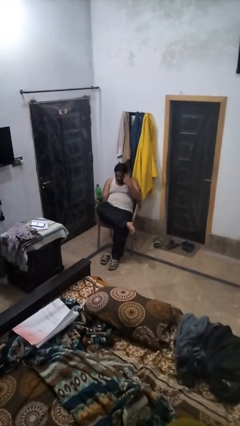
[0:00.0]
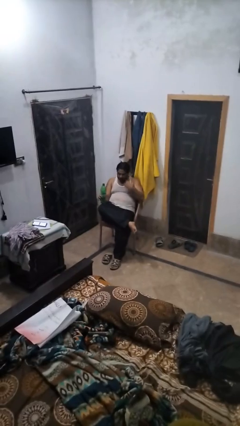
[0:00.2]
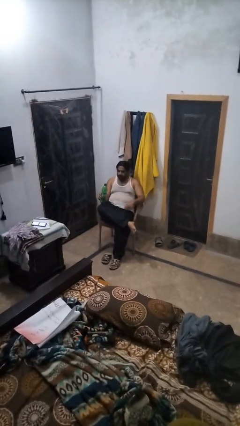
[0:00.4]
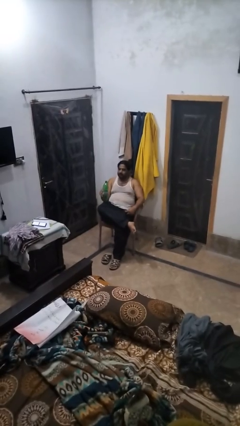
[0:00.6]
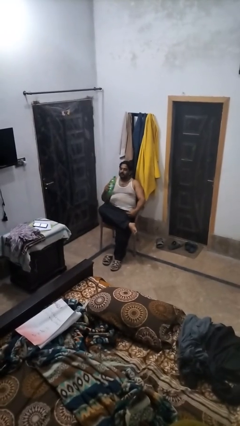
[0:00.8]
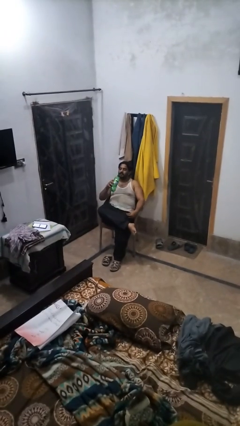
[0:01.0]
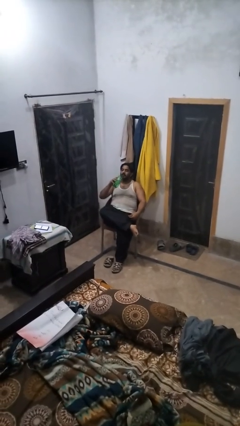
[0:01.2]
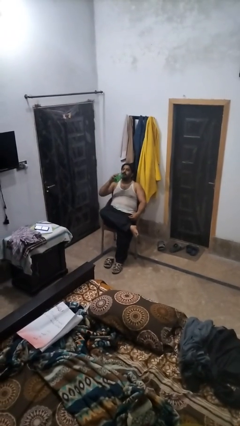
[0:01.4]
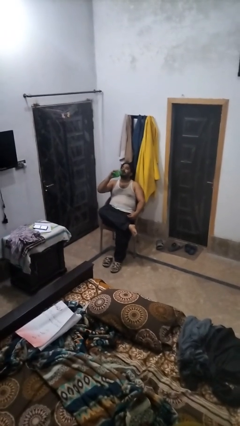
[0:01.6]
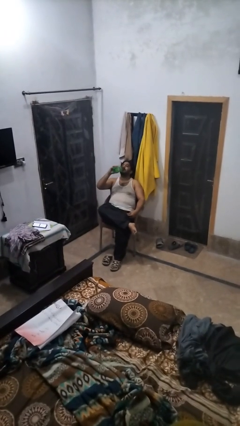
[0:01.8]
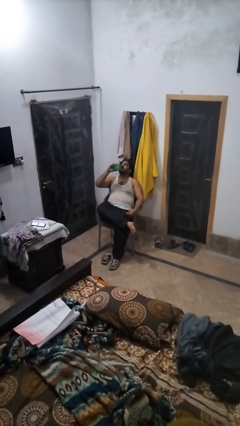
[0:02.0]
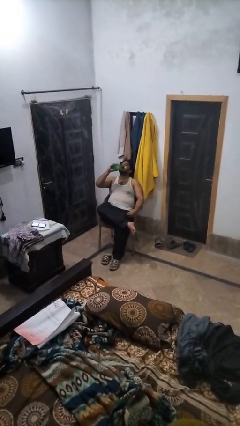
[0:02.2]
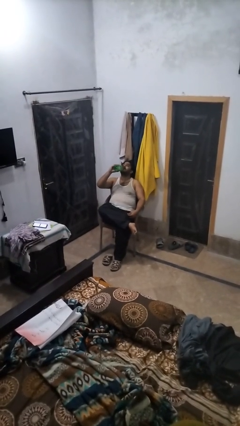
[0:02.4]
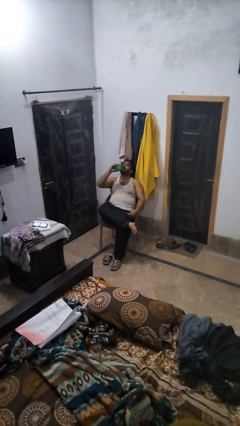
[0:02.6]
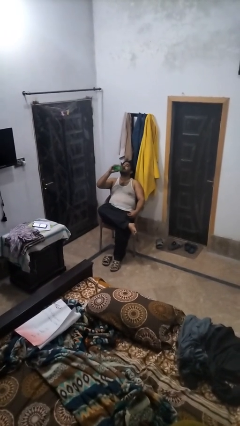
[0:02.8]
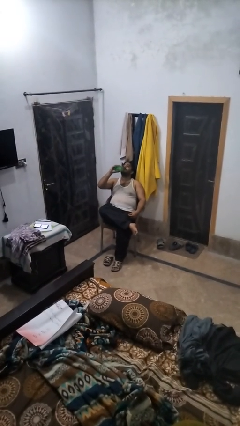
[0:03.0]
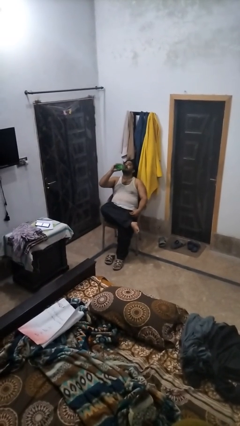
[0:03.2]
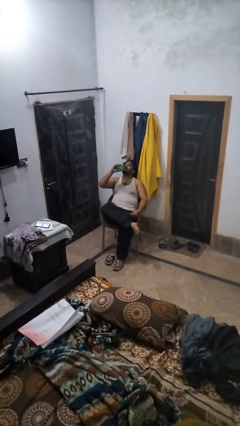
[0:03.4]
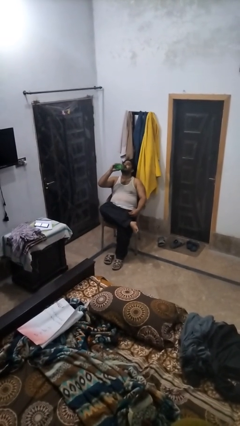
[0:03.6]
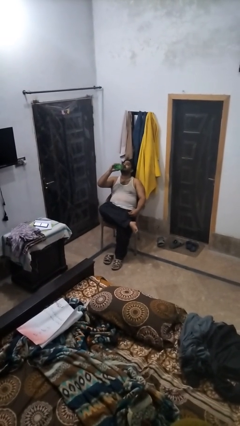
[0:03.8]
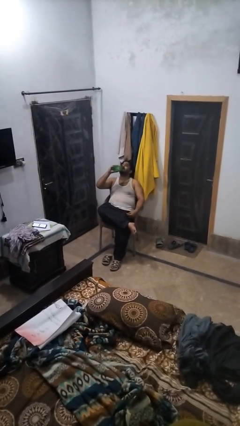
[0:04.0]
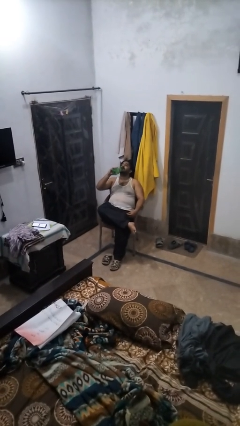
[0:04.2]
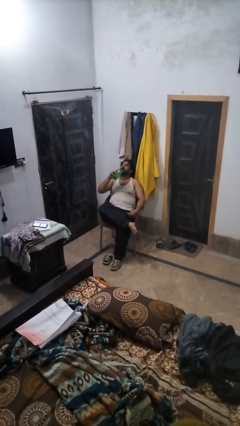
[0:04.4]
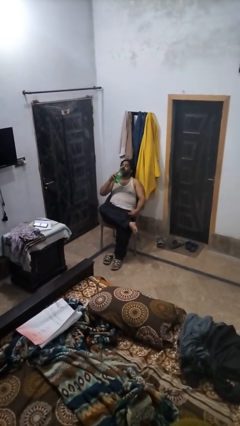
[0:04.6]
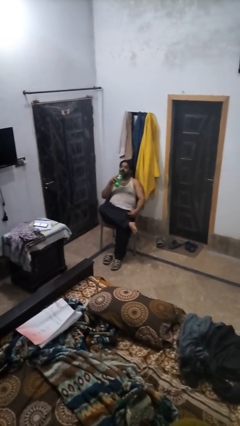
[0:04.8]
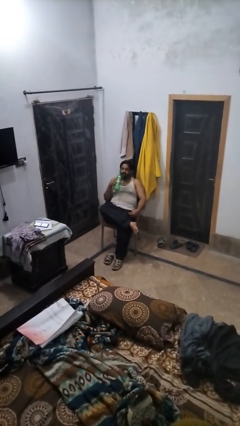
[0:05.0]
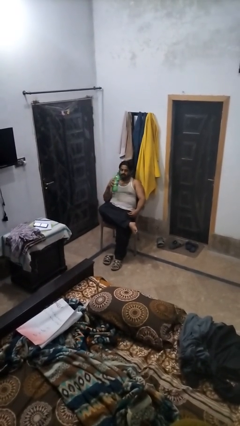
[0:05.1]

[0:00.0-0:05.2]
person drinks from bottle

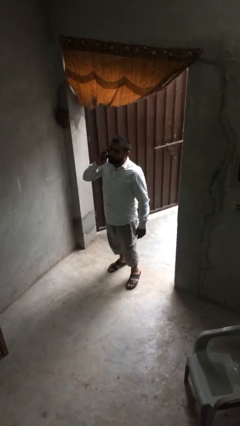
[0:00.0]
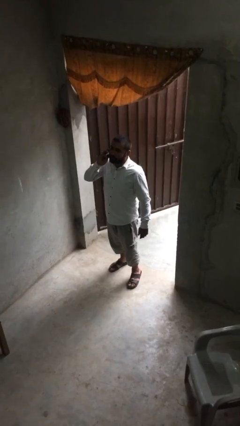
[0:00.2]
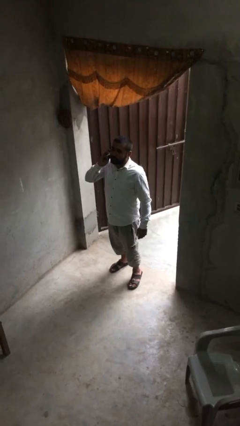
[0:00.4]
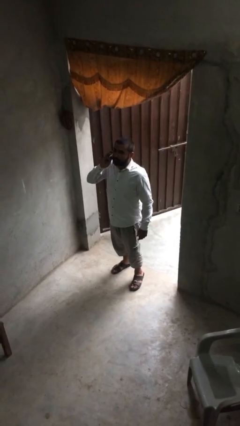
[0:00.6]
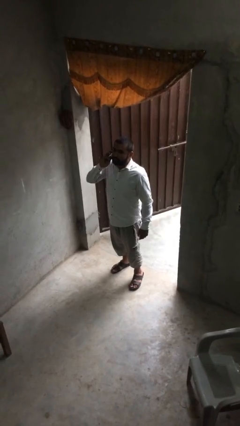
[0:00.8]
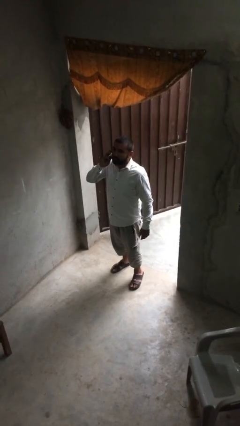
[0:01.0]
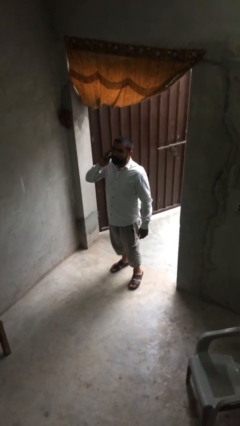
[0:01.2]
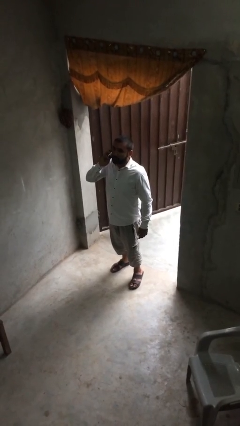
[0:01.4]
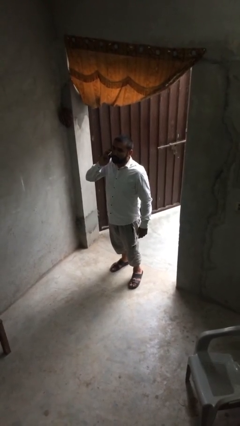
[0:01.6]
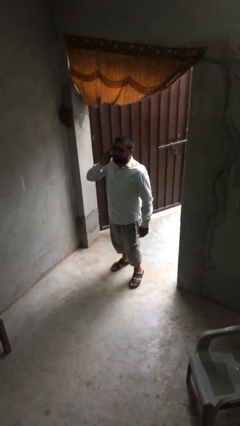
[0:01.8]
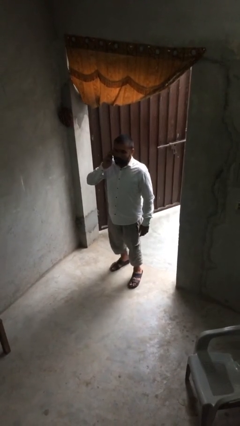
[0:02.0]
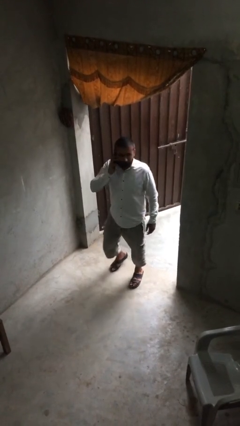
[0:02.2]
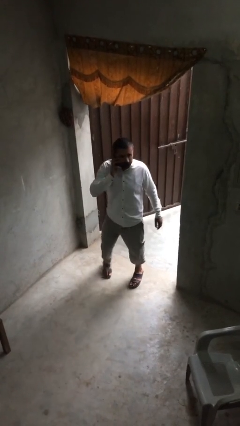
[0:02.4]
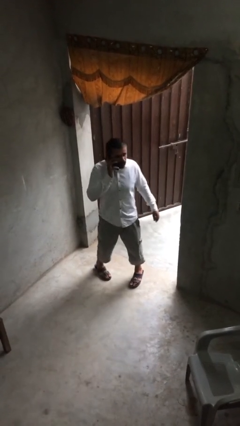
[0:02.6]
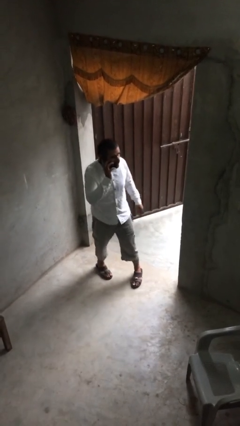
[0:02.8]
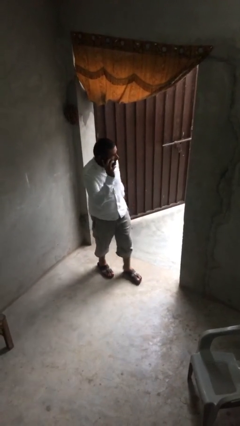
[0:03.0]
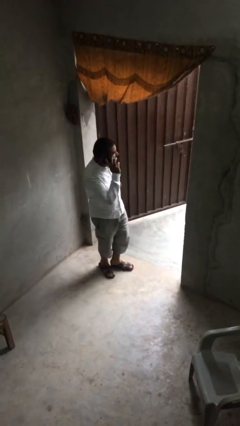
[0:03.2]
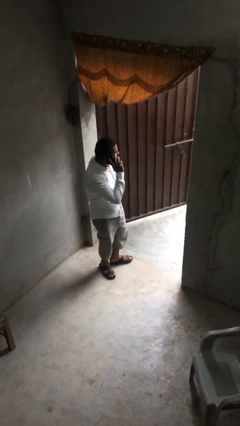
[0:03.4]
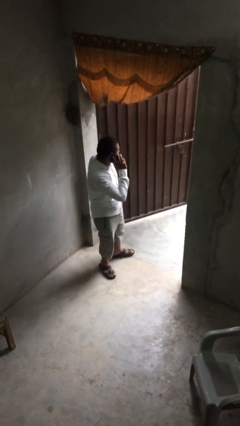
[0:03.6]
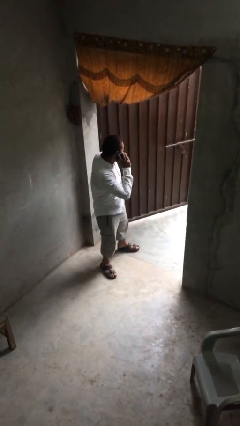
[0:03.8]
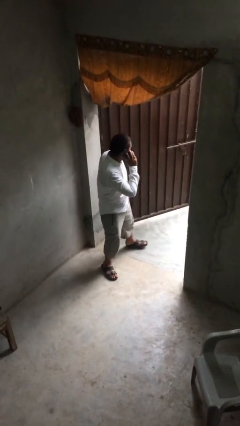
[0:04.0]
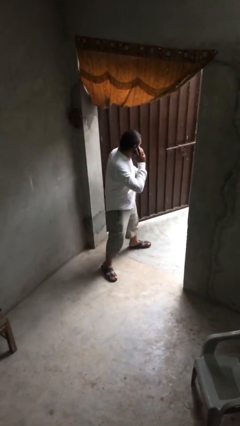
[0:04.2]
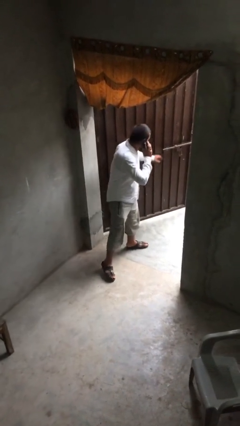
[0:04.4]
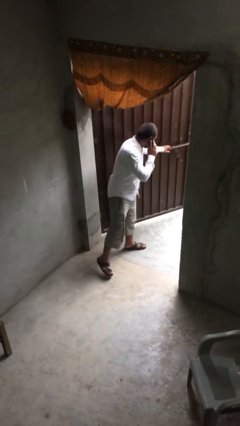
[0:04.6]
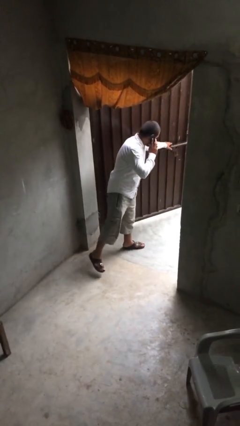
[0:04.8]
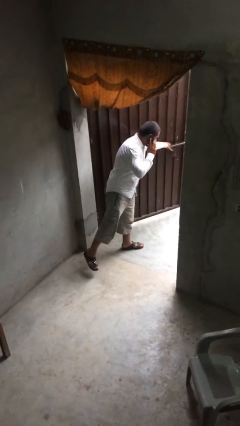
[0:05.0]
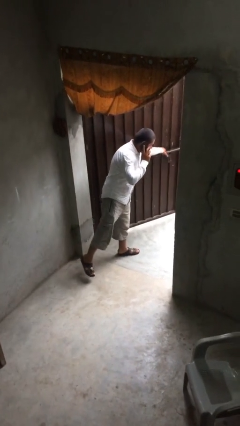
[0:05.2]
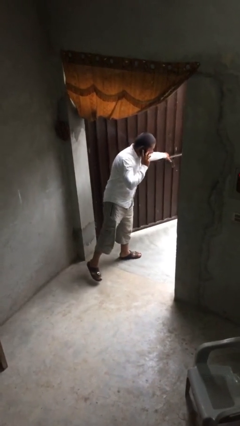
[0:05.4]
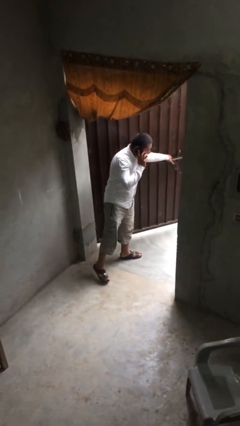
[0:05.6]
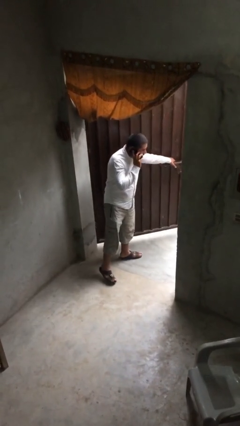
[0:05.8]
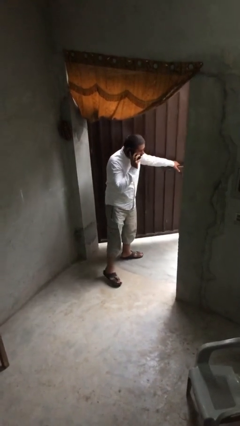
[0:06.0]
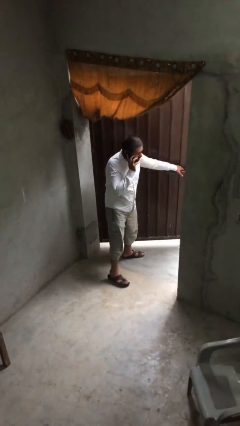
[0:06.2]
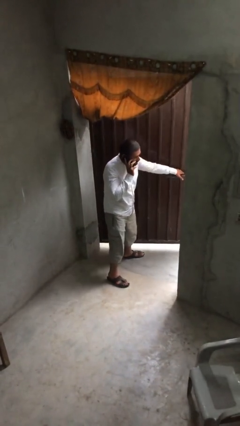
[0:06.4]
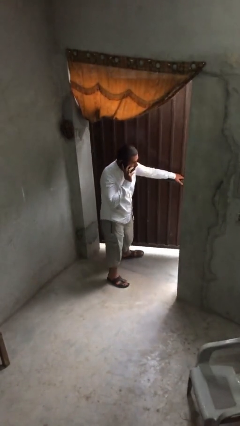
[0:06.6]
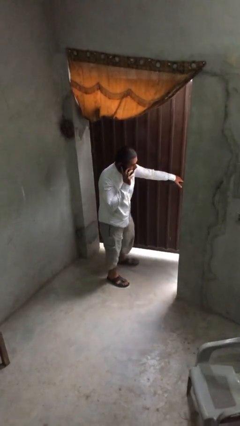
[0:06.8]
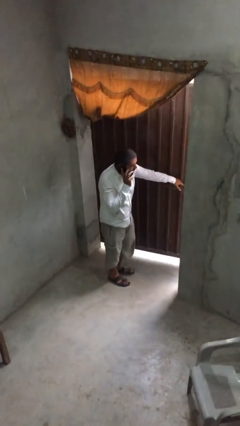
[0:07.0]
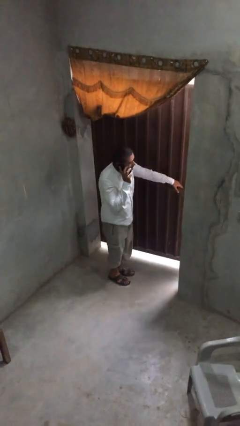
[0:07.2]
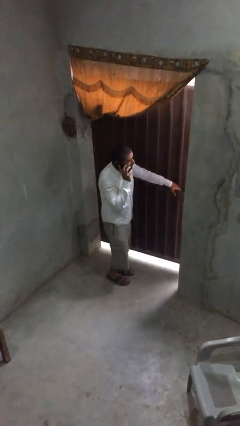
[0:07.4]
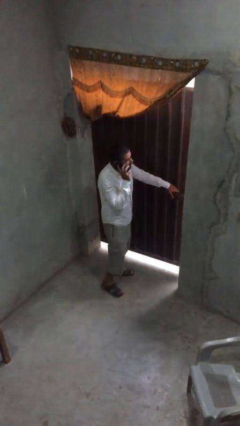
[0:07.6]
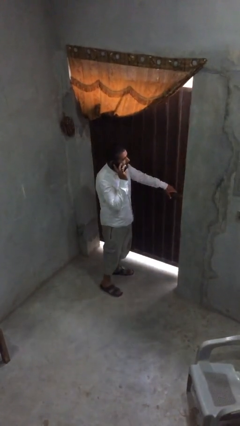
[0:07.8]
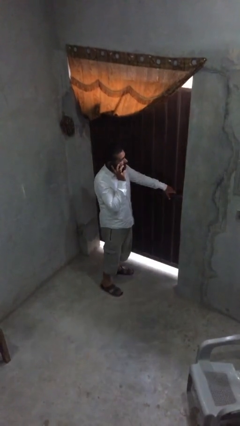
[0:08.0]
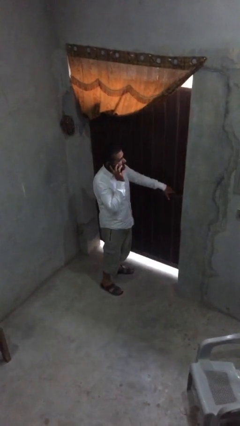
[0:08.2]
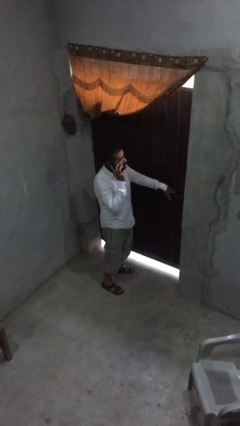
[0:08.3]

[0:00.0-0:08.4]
person closes facility door

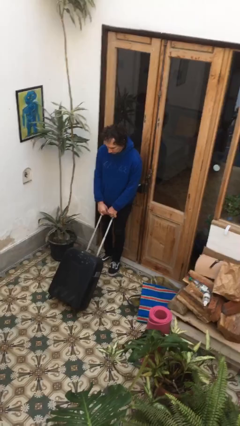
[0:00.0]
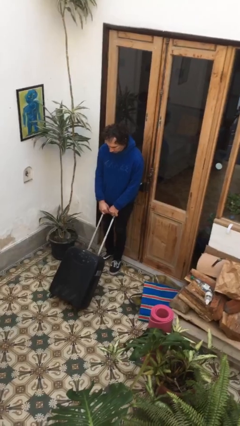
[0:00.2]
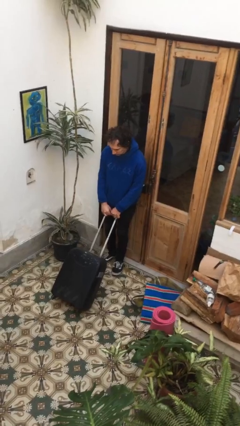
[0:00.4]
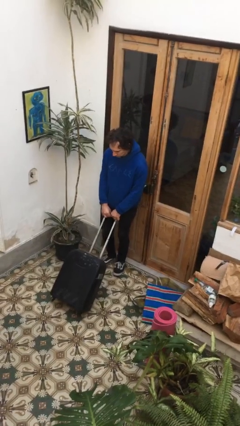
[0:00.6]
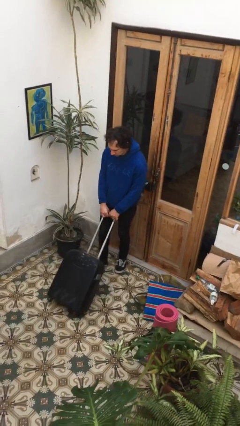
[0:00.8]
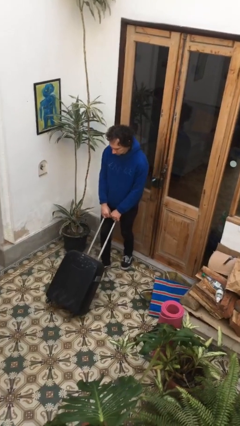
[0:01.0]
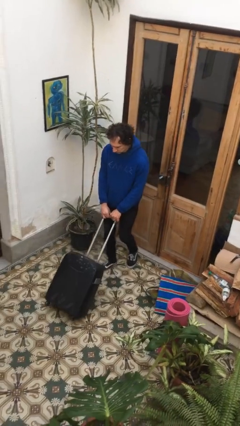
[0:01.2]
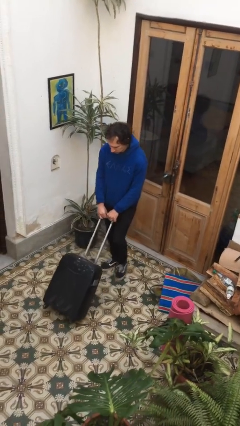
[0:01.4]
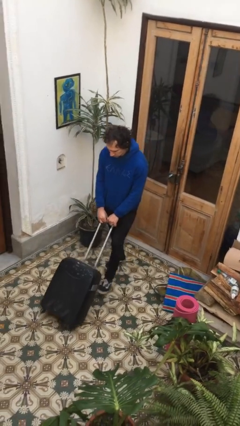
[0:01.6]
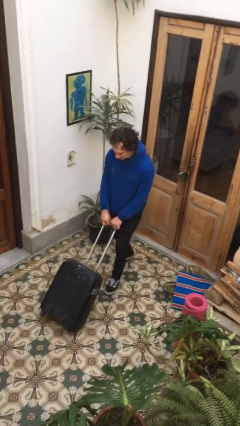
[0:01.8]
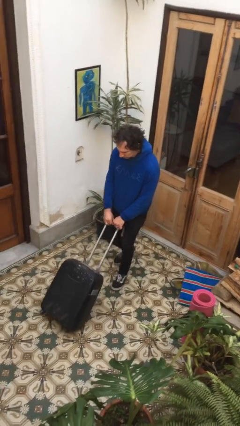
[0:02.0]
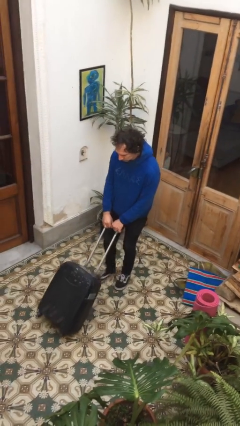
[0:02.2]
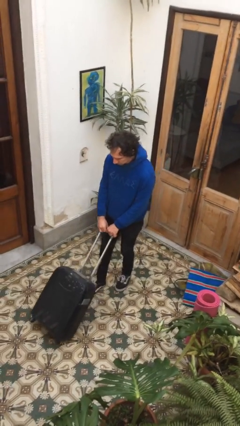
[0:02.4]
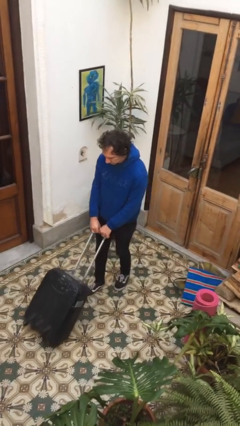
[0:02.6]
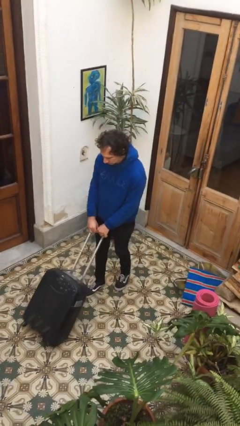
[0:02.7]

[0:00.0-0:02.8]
person pushes wheeled cart

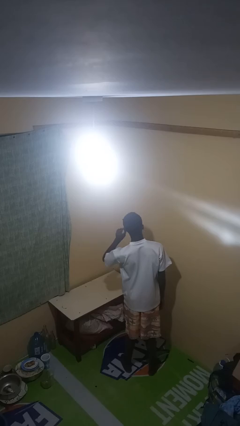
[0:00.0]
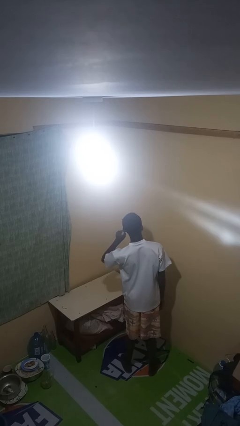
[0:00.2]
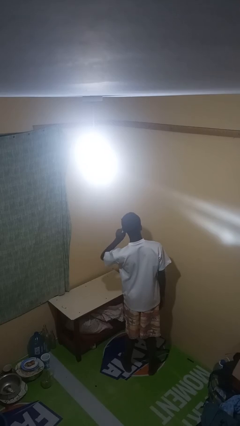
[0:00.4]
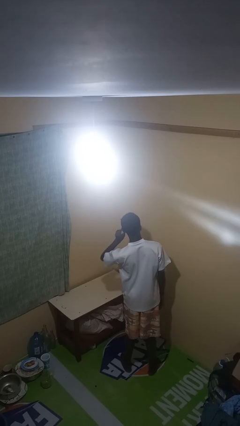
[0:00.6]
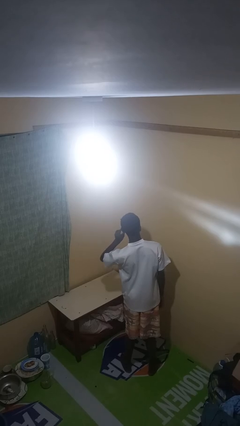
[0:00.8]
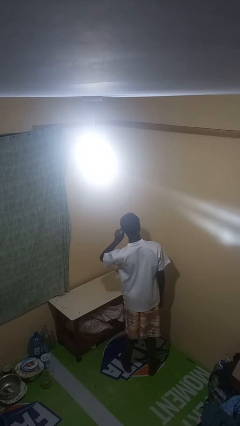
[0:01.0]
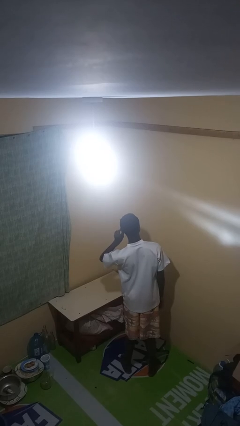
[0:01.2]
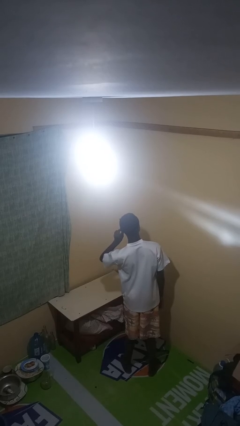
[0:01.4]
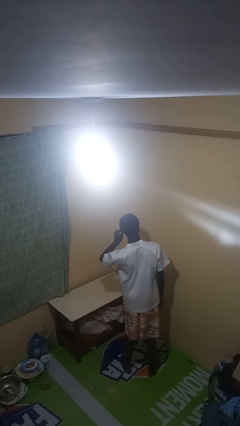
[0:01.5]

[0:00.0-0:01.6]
person gestures listen closely

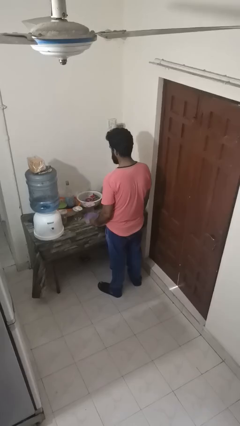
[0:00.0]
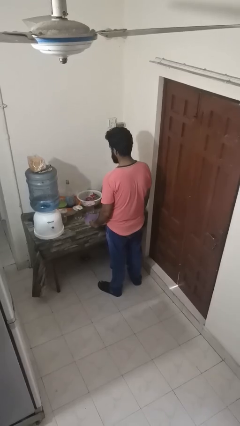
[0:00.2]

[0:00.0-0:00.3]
person puts down object on countertop
